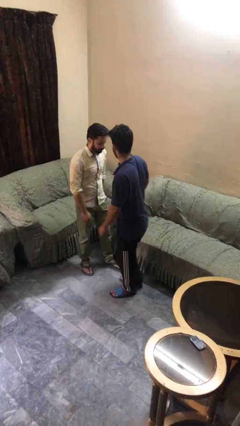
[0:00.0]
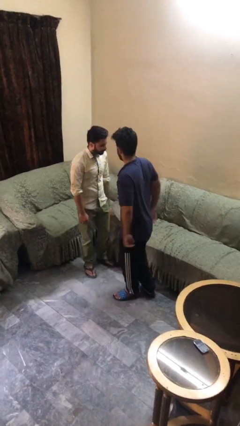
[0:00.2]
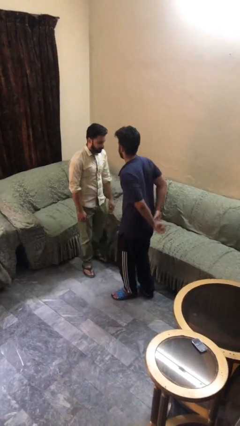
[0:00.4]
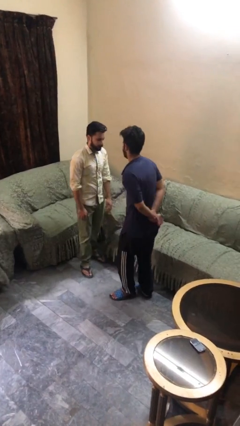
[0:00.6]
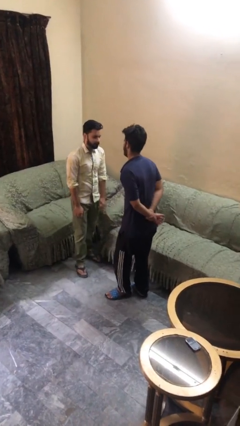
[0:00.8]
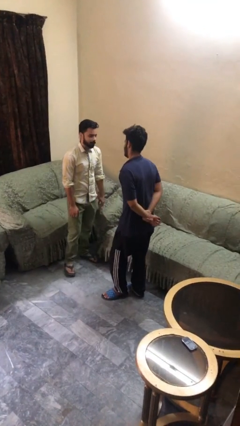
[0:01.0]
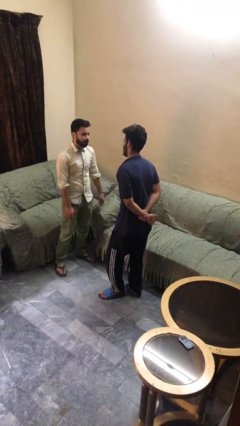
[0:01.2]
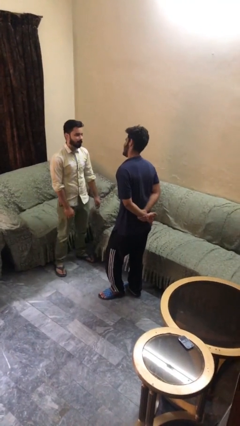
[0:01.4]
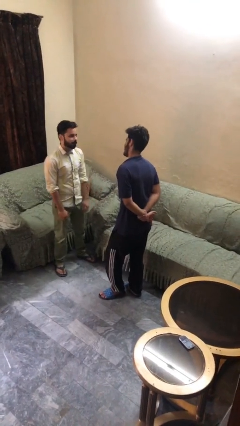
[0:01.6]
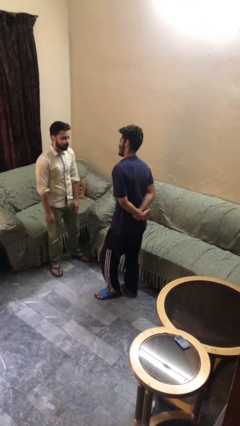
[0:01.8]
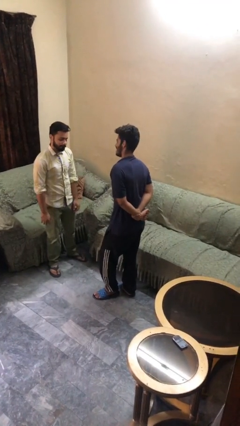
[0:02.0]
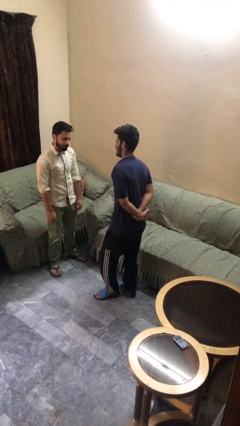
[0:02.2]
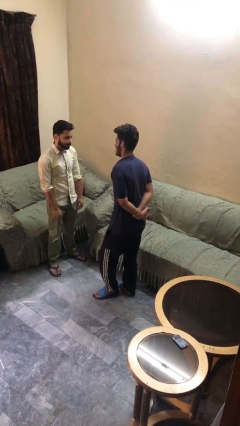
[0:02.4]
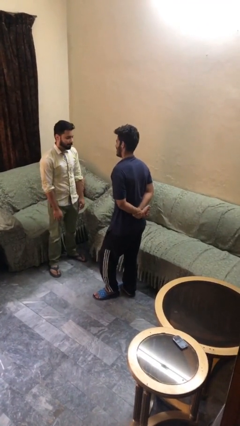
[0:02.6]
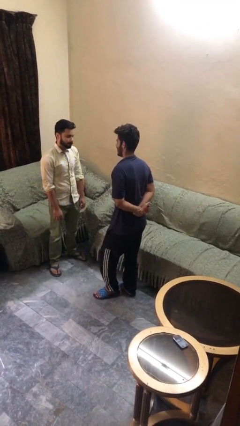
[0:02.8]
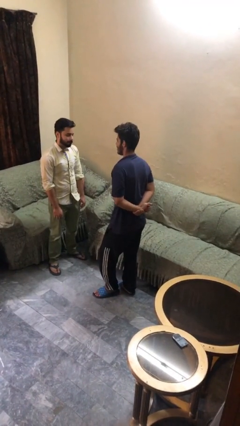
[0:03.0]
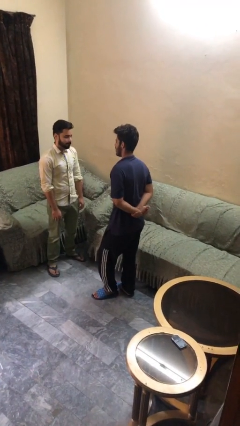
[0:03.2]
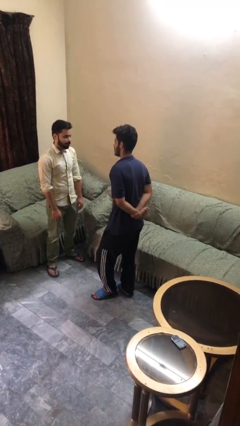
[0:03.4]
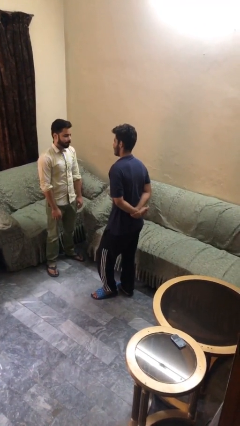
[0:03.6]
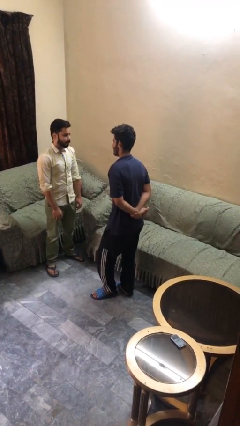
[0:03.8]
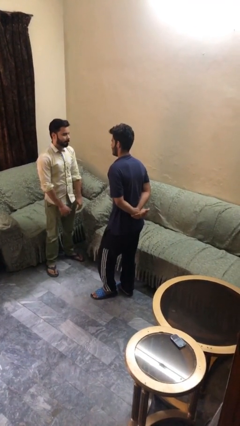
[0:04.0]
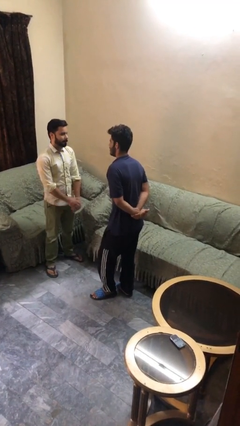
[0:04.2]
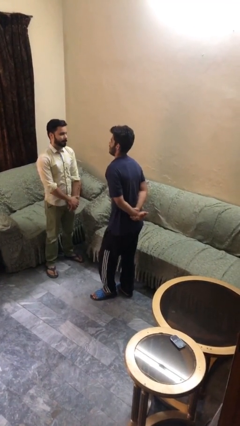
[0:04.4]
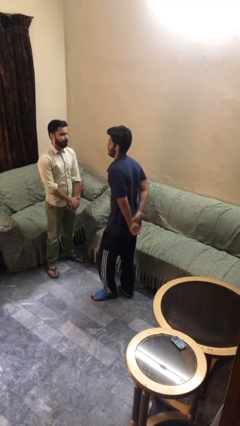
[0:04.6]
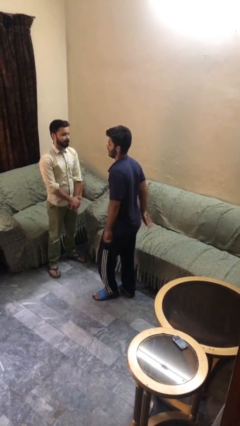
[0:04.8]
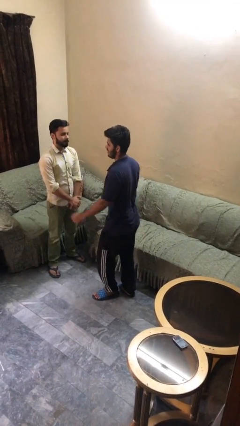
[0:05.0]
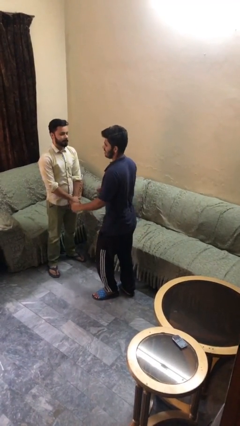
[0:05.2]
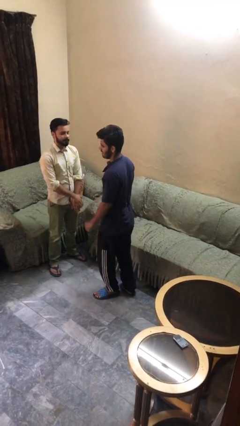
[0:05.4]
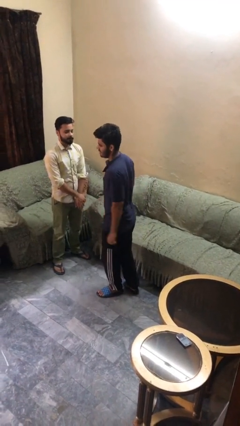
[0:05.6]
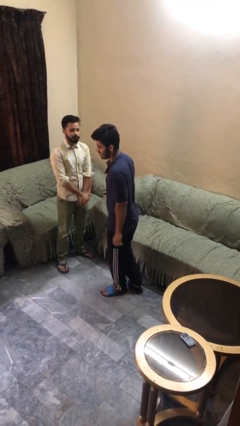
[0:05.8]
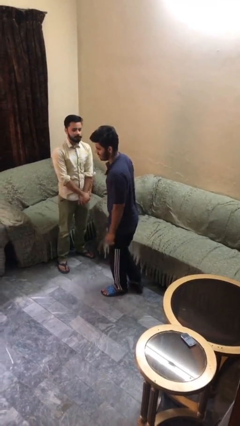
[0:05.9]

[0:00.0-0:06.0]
person talks to person

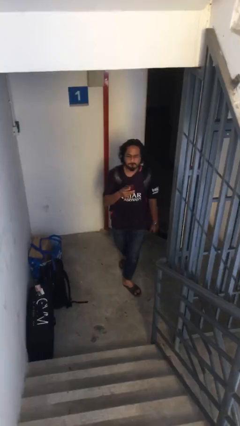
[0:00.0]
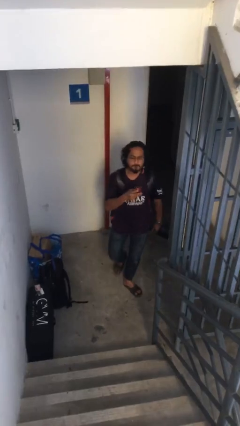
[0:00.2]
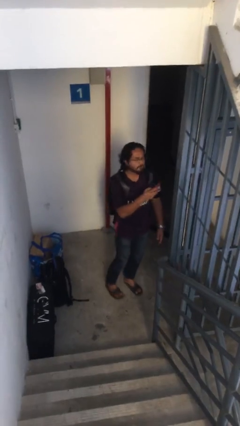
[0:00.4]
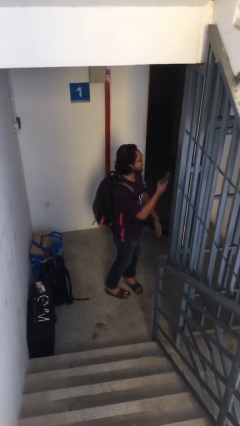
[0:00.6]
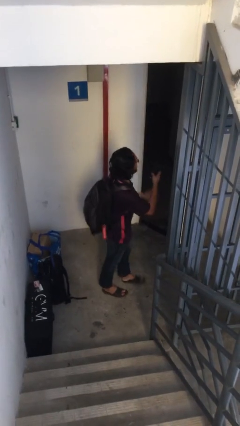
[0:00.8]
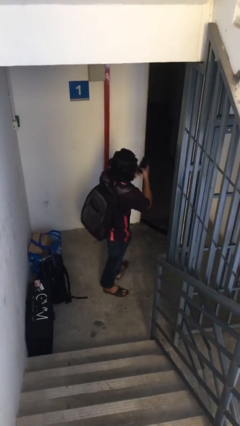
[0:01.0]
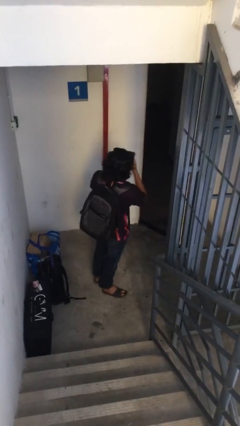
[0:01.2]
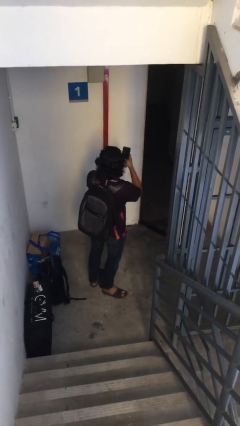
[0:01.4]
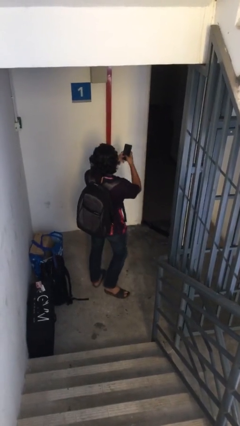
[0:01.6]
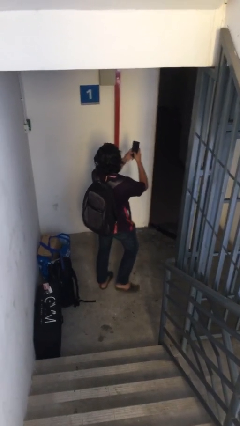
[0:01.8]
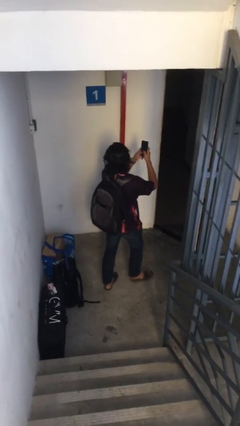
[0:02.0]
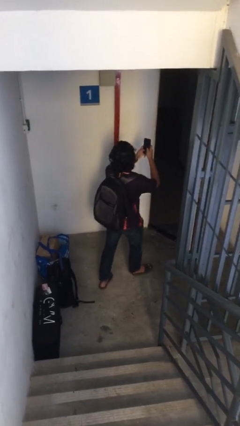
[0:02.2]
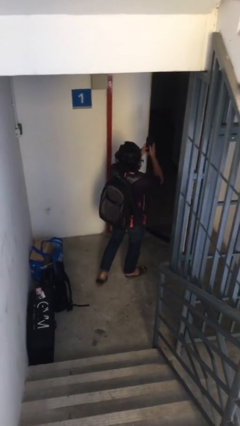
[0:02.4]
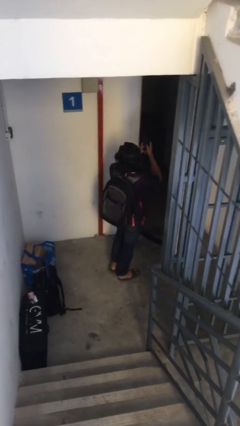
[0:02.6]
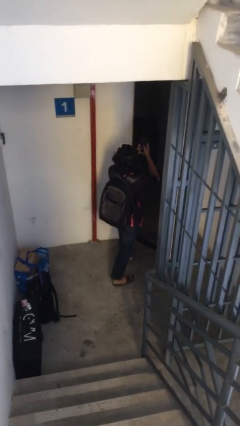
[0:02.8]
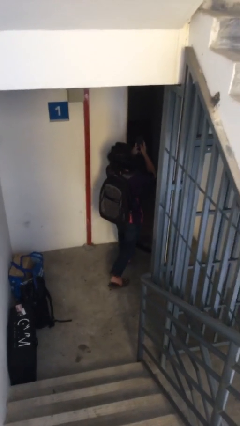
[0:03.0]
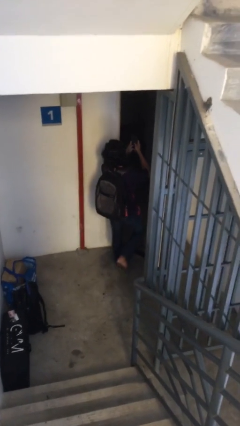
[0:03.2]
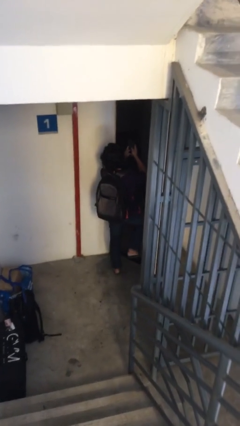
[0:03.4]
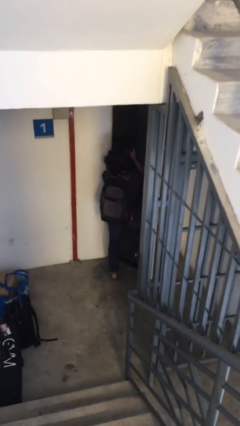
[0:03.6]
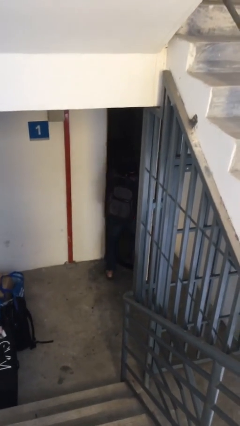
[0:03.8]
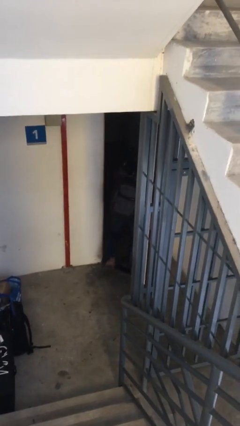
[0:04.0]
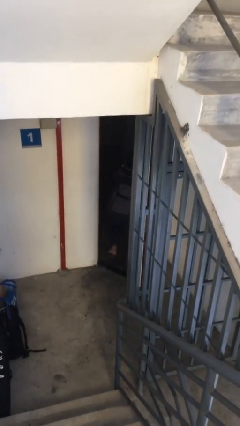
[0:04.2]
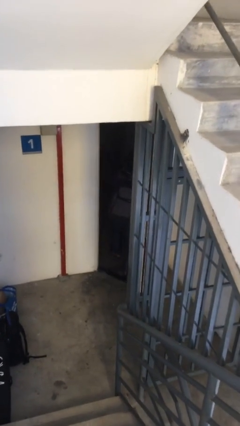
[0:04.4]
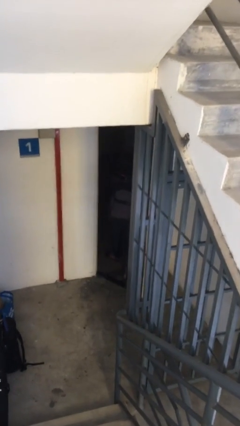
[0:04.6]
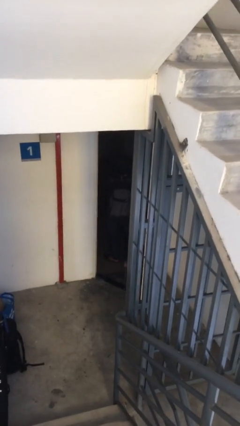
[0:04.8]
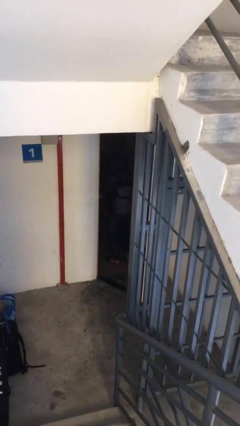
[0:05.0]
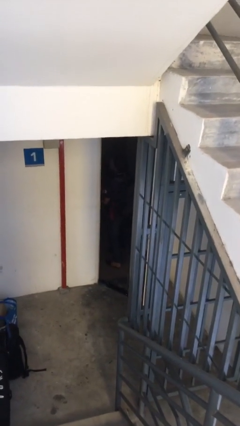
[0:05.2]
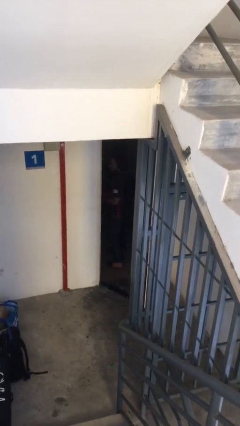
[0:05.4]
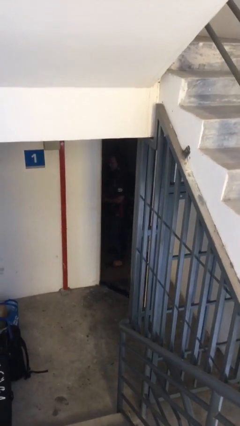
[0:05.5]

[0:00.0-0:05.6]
person exits scene through structure

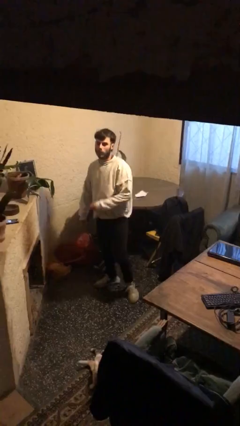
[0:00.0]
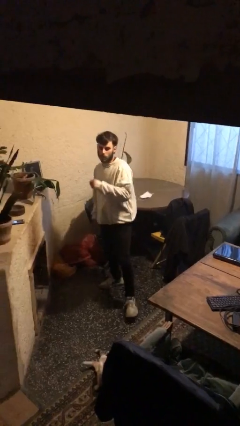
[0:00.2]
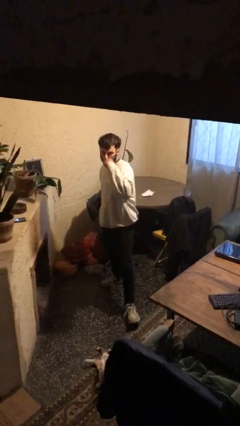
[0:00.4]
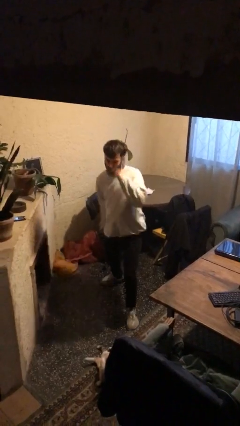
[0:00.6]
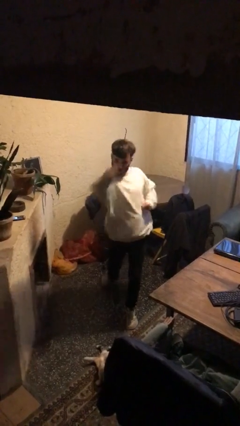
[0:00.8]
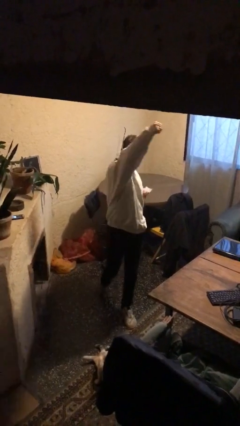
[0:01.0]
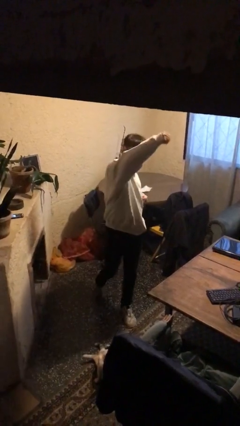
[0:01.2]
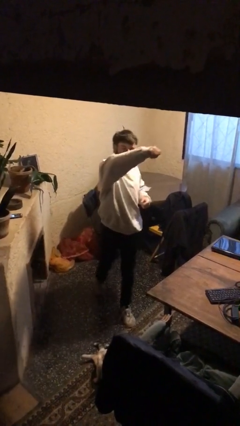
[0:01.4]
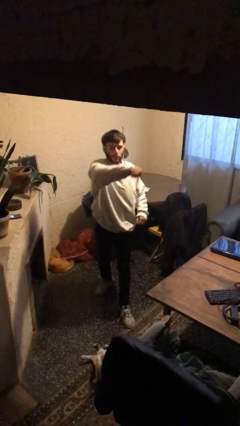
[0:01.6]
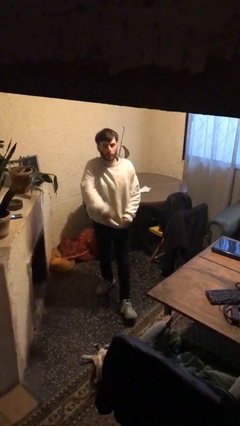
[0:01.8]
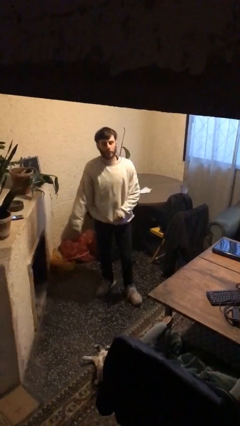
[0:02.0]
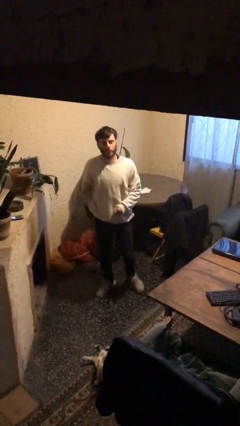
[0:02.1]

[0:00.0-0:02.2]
person punches

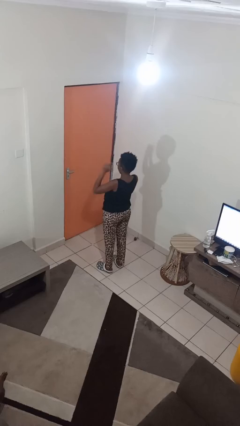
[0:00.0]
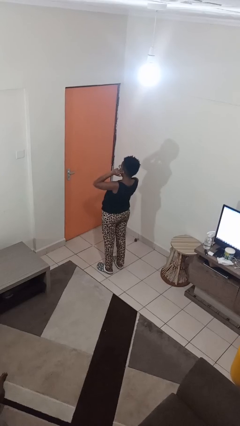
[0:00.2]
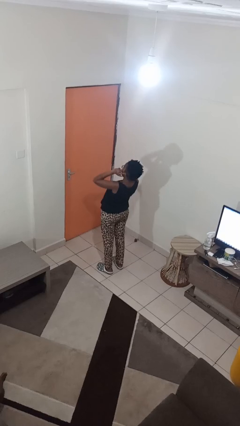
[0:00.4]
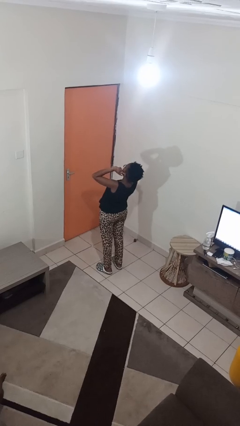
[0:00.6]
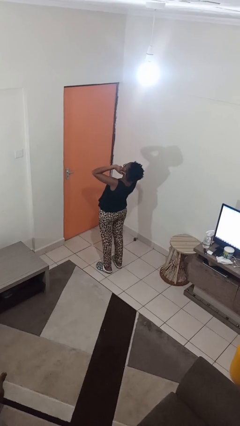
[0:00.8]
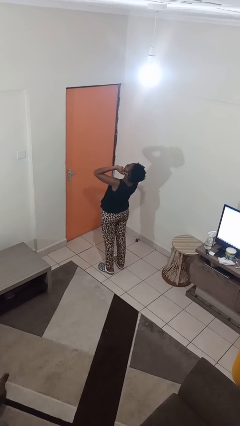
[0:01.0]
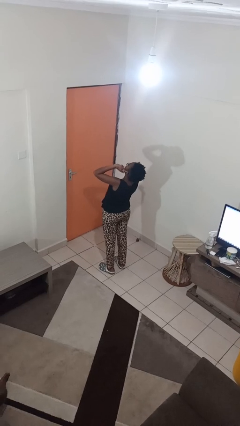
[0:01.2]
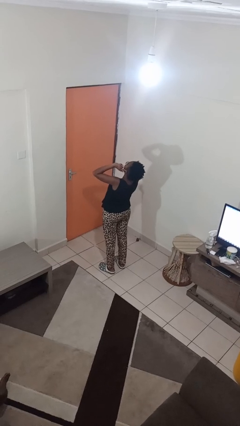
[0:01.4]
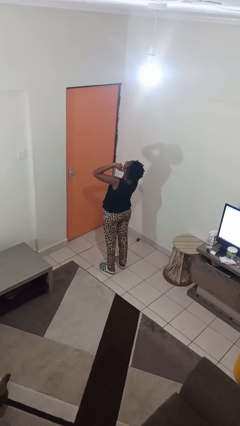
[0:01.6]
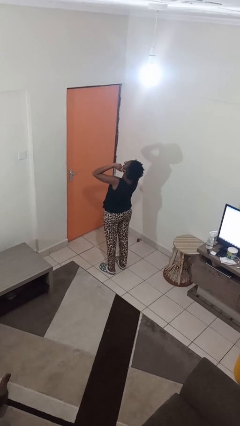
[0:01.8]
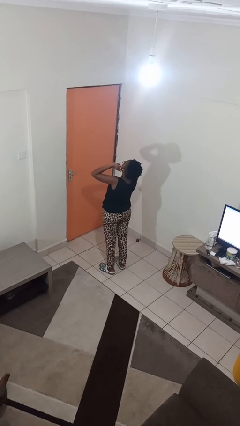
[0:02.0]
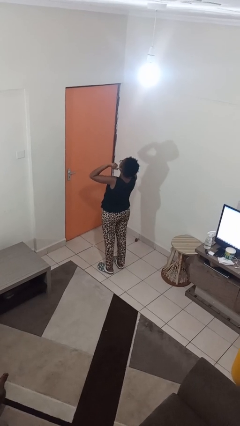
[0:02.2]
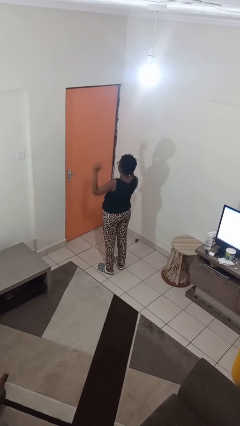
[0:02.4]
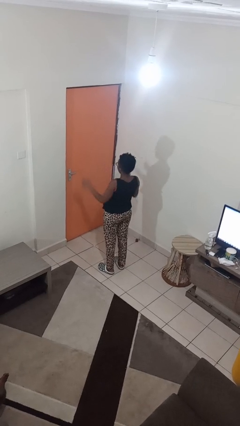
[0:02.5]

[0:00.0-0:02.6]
person puts fingers in ear

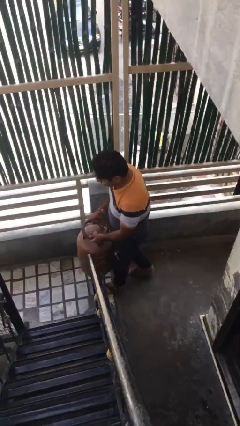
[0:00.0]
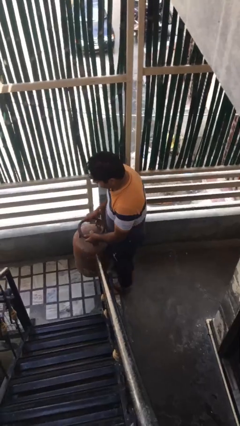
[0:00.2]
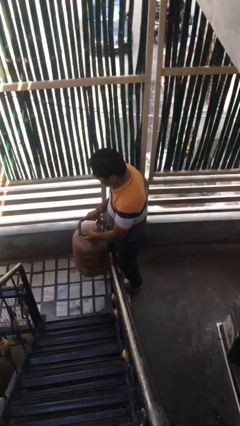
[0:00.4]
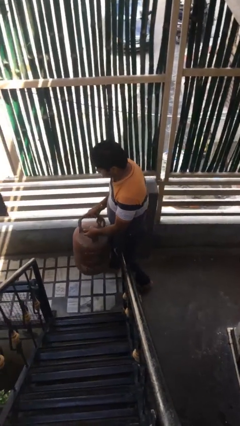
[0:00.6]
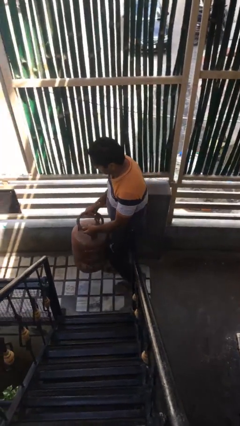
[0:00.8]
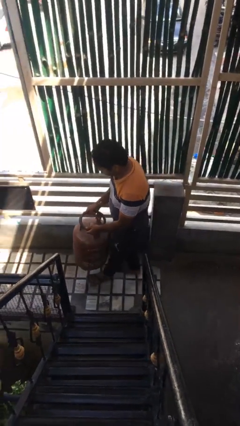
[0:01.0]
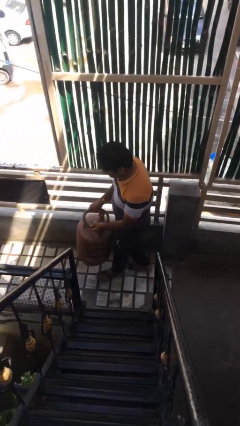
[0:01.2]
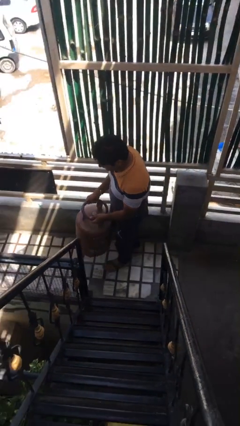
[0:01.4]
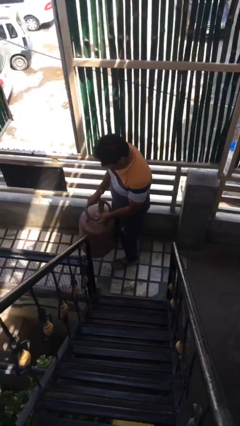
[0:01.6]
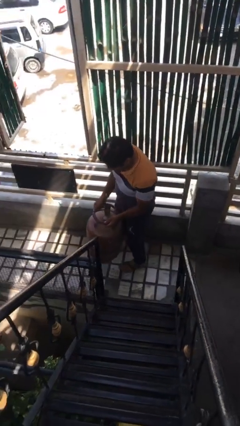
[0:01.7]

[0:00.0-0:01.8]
person carries heavy object
